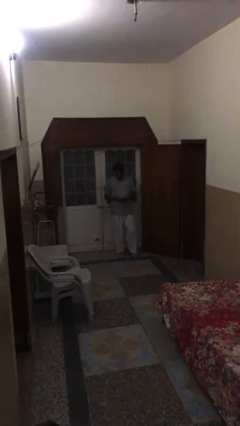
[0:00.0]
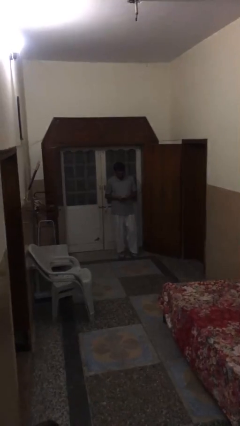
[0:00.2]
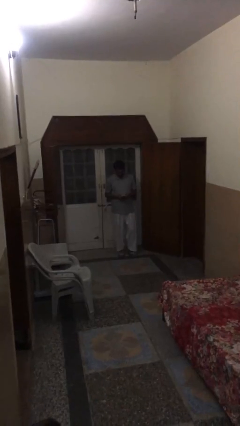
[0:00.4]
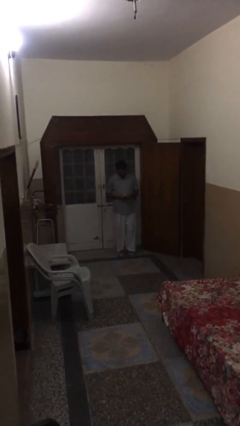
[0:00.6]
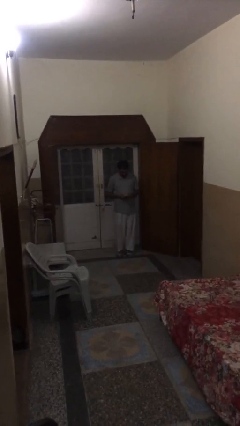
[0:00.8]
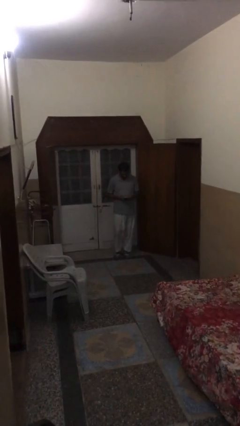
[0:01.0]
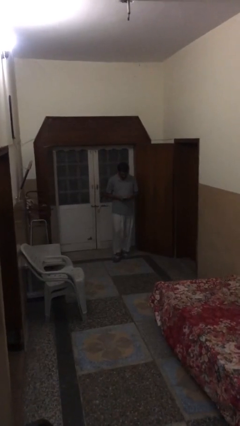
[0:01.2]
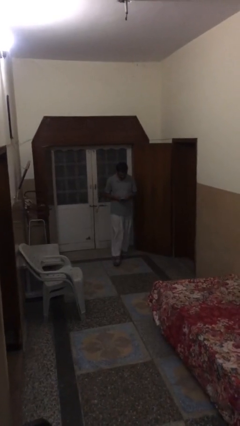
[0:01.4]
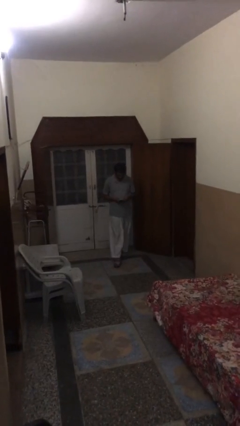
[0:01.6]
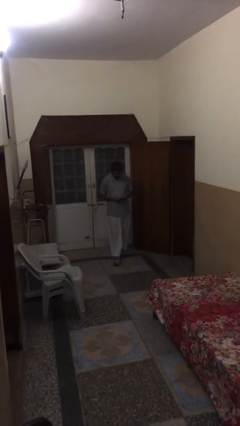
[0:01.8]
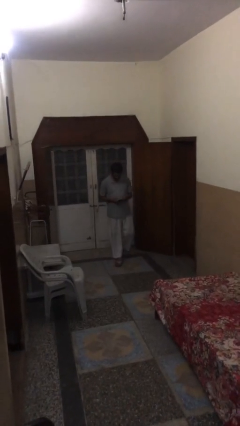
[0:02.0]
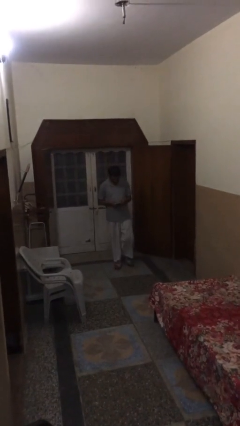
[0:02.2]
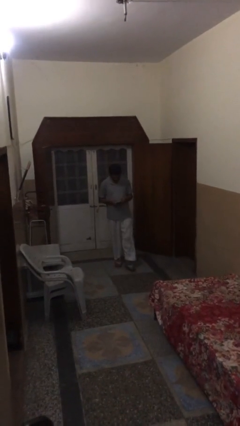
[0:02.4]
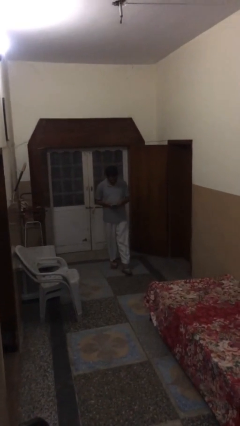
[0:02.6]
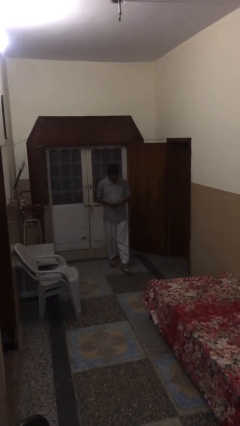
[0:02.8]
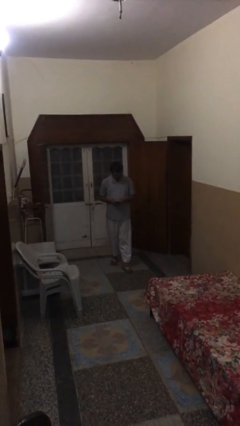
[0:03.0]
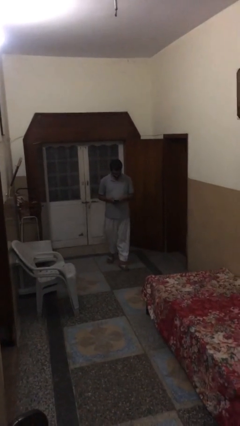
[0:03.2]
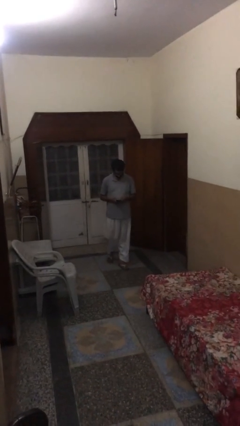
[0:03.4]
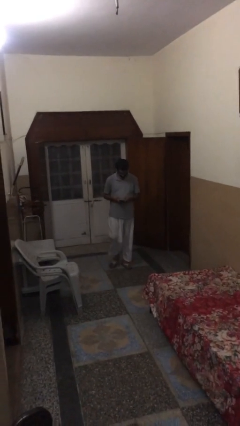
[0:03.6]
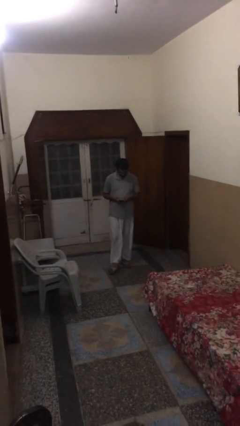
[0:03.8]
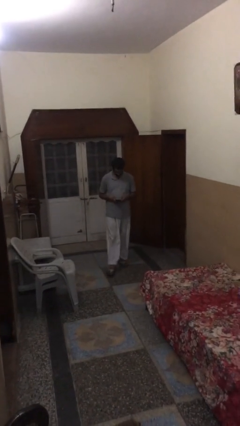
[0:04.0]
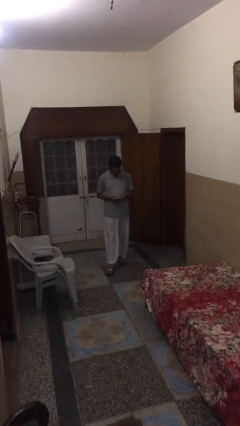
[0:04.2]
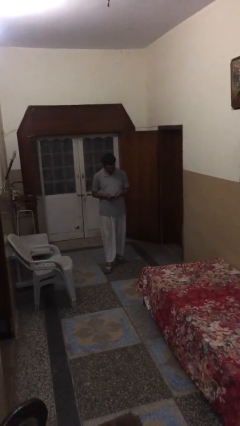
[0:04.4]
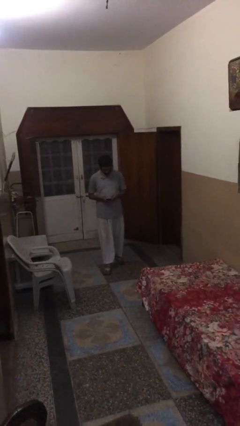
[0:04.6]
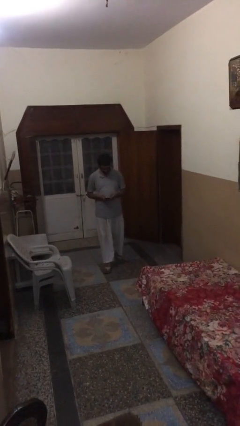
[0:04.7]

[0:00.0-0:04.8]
person texts on phone

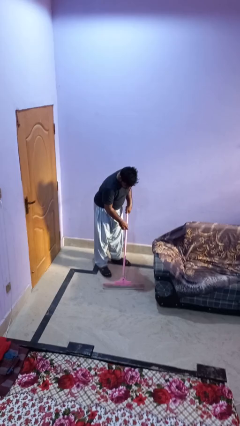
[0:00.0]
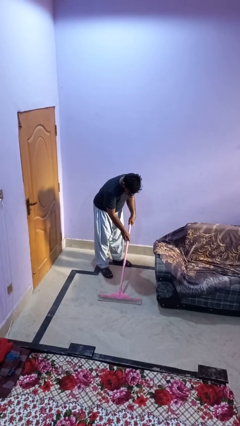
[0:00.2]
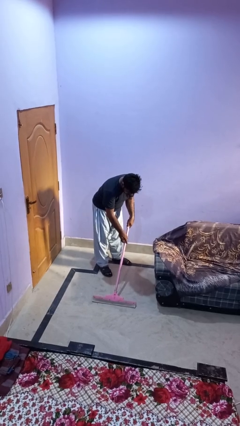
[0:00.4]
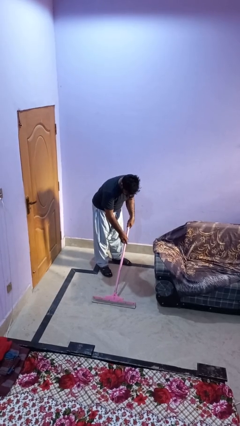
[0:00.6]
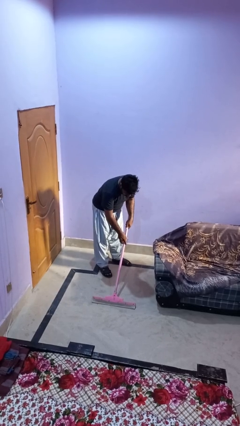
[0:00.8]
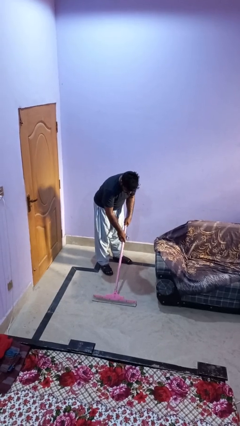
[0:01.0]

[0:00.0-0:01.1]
person vacuums carpet

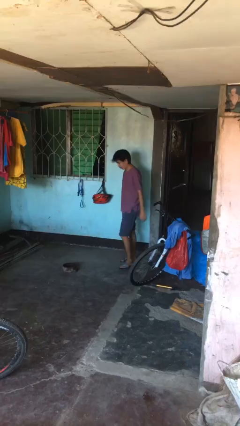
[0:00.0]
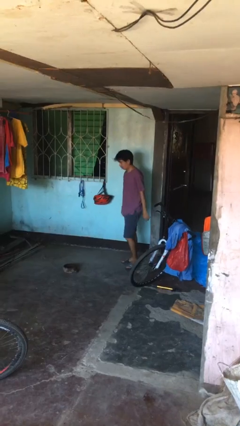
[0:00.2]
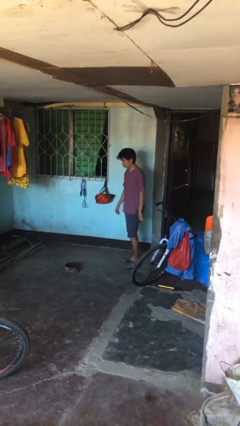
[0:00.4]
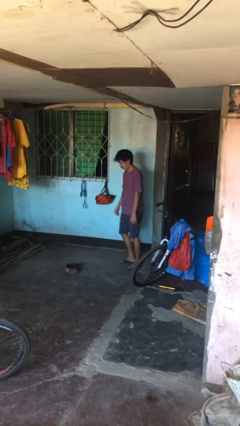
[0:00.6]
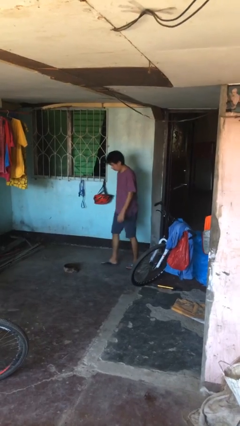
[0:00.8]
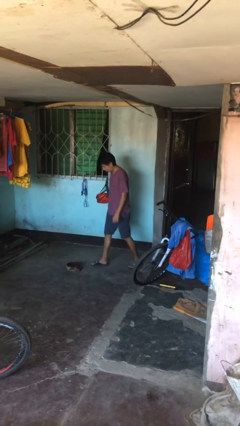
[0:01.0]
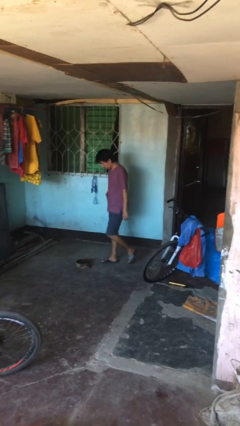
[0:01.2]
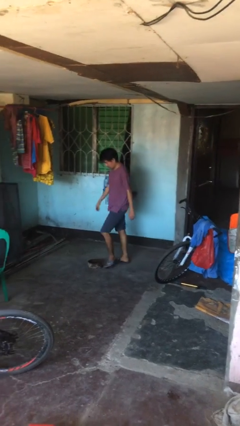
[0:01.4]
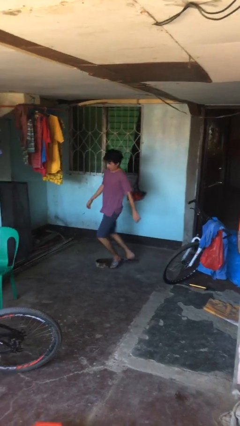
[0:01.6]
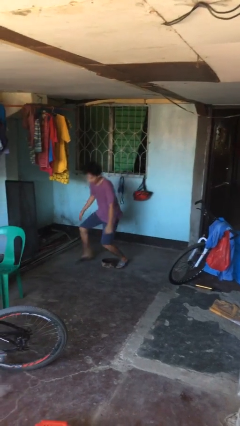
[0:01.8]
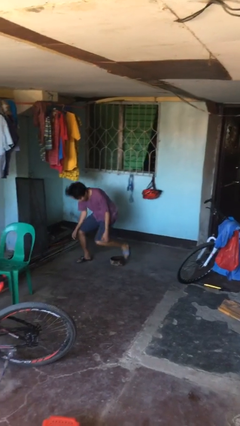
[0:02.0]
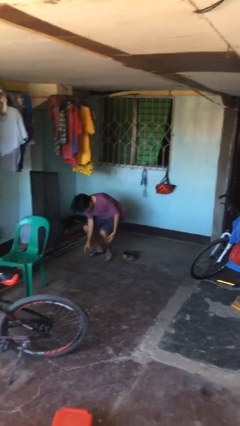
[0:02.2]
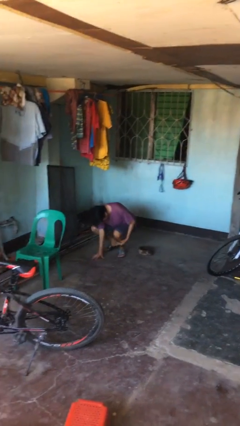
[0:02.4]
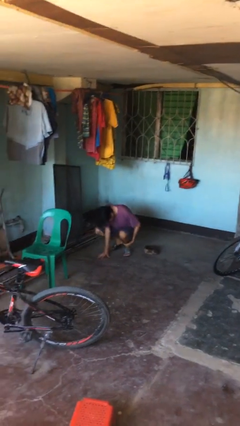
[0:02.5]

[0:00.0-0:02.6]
person trips on object on floor

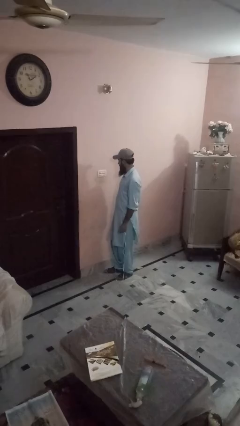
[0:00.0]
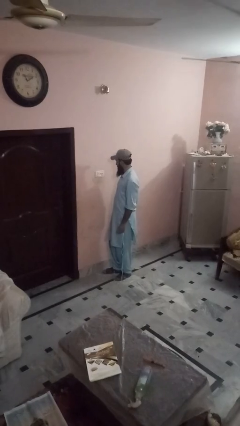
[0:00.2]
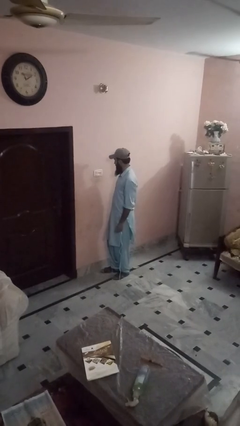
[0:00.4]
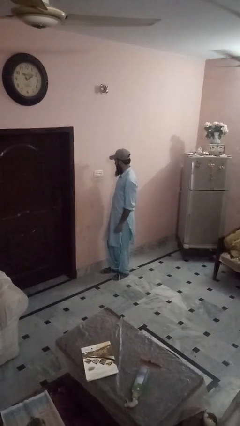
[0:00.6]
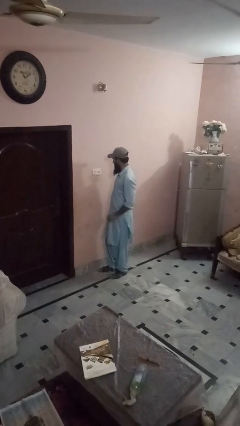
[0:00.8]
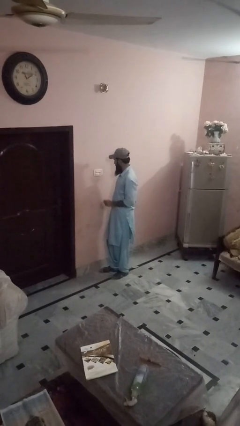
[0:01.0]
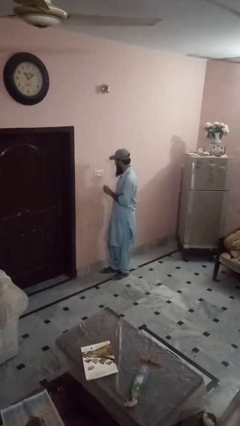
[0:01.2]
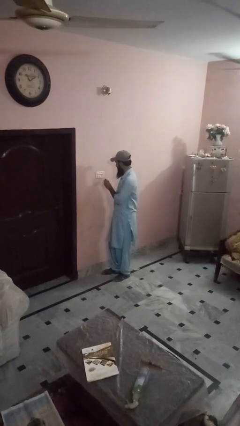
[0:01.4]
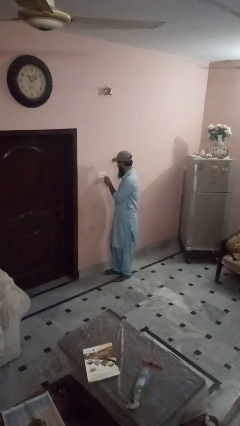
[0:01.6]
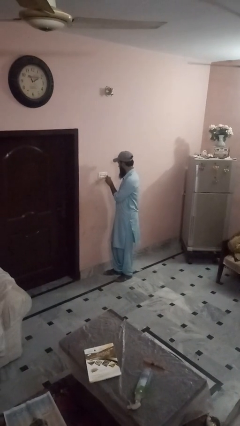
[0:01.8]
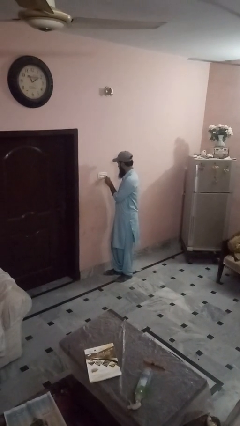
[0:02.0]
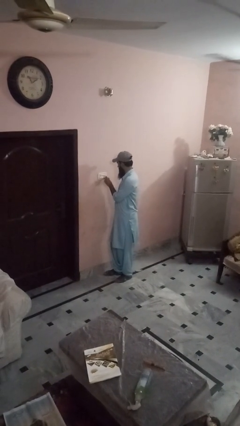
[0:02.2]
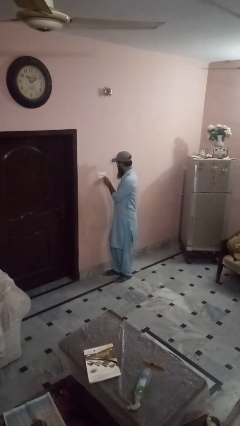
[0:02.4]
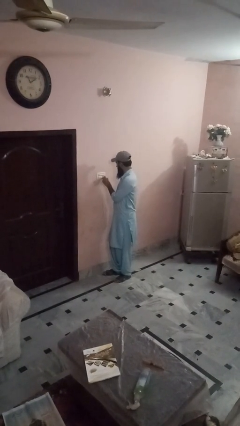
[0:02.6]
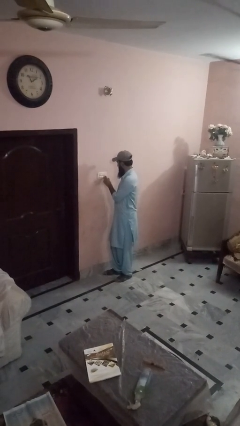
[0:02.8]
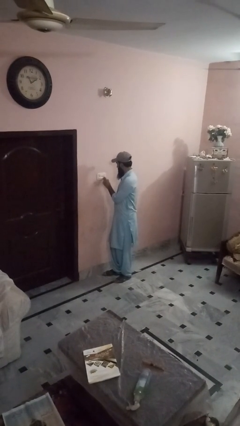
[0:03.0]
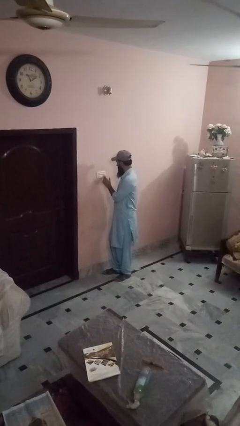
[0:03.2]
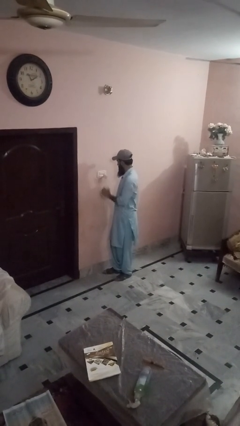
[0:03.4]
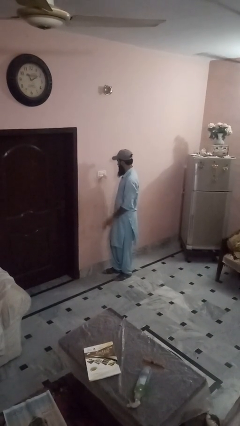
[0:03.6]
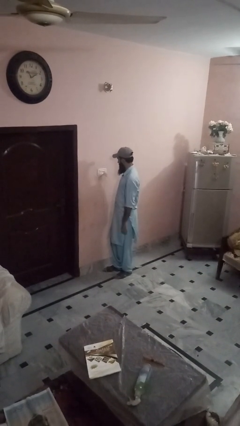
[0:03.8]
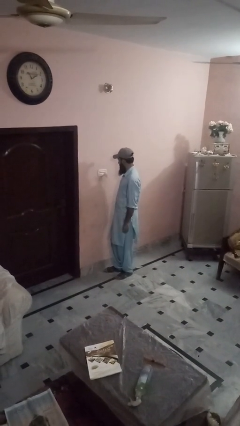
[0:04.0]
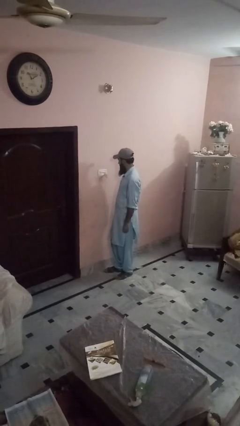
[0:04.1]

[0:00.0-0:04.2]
person plugs into electrical socket

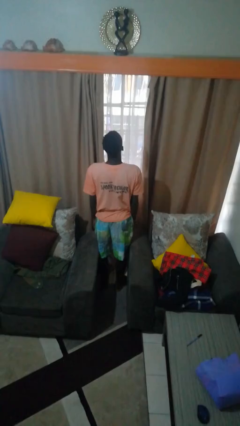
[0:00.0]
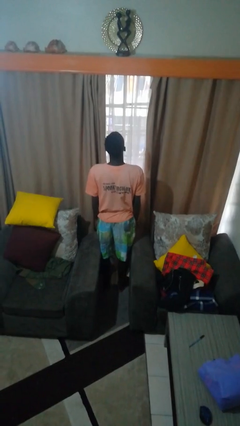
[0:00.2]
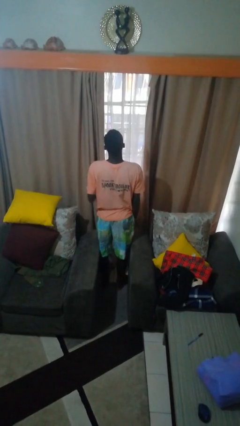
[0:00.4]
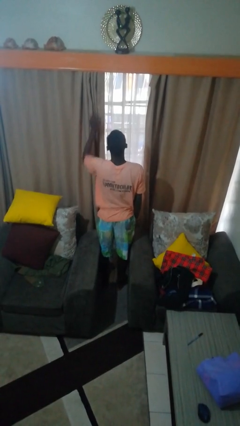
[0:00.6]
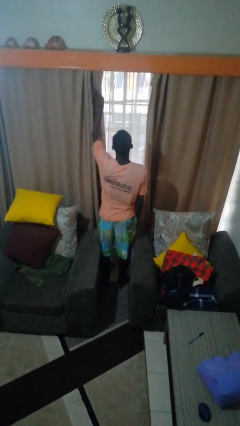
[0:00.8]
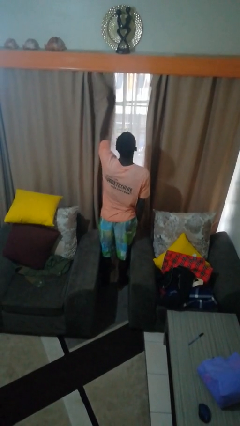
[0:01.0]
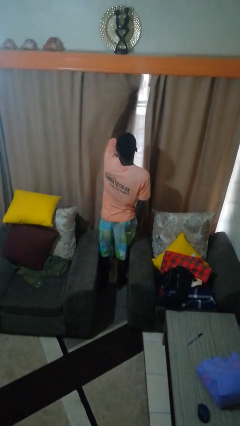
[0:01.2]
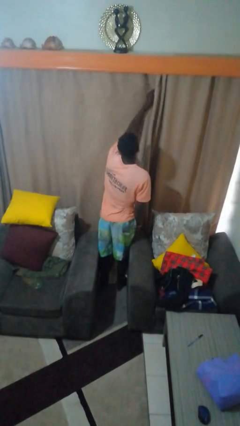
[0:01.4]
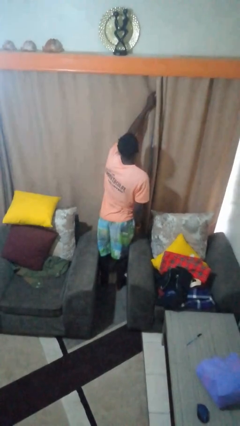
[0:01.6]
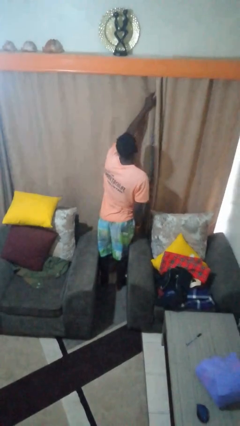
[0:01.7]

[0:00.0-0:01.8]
person closes curtains

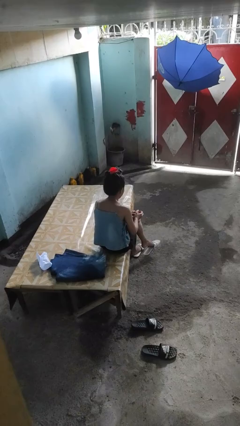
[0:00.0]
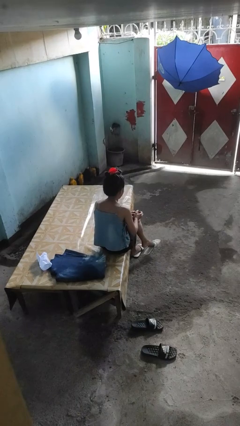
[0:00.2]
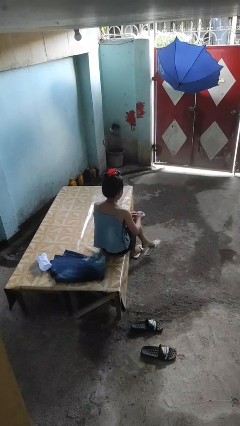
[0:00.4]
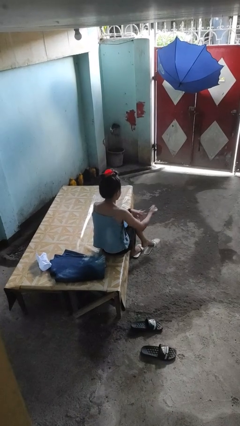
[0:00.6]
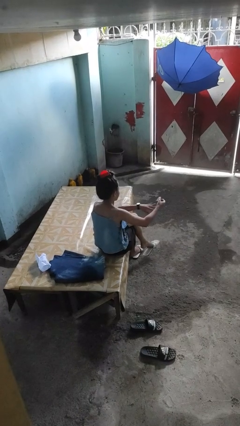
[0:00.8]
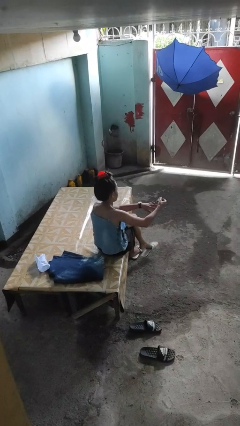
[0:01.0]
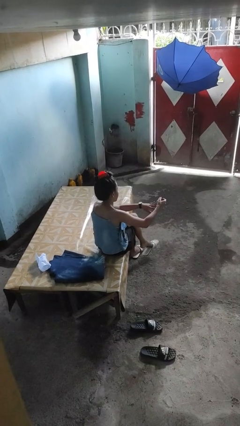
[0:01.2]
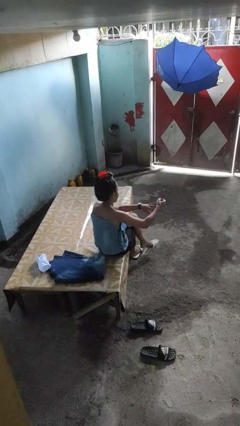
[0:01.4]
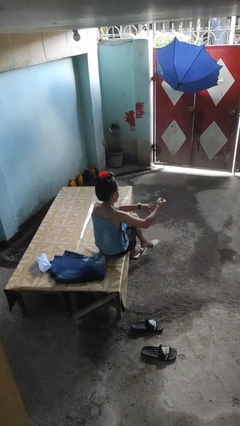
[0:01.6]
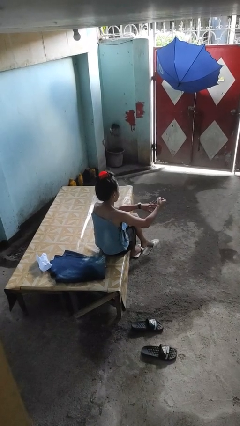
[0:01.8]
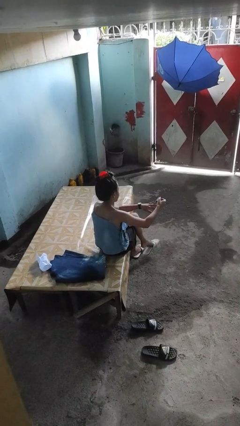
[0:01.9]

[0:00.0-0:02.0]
person clips fingernails

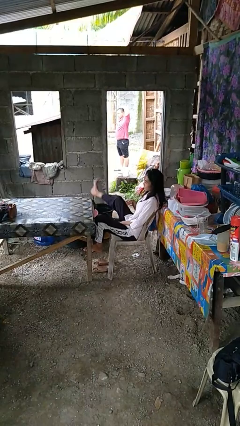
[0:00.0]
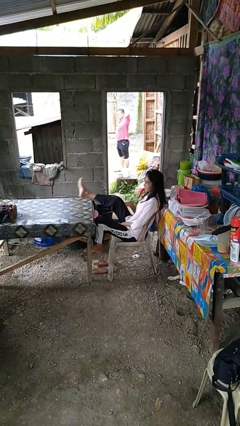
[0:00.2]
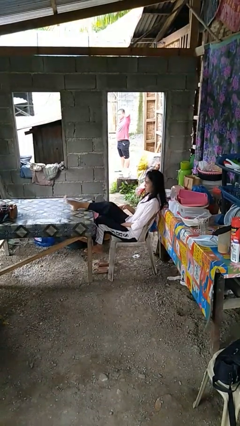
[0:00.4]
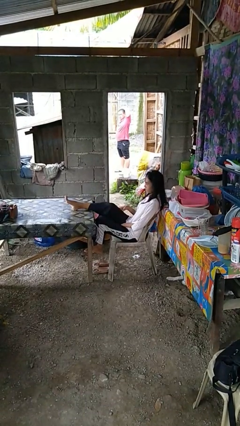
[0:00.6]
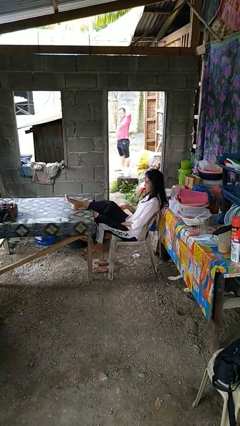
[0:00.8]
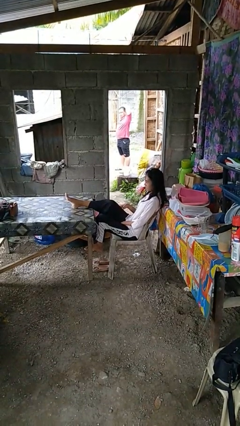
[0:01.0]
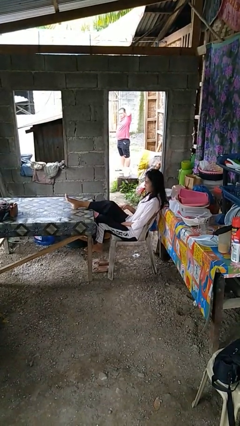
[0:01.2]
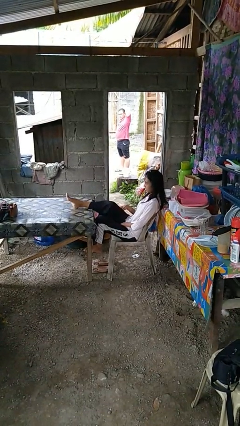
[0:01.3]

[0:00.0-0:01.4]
person puts feet up
